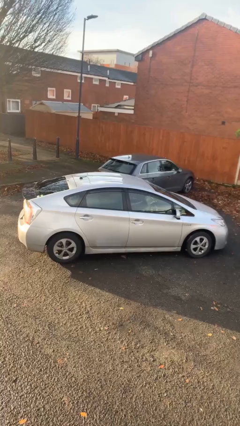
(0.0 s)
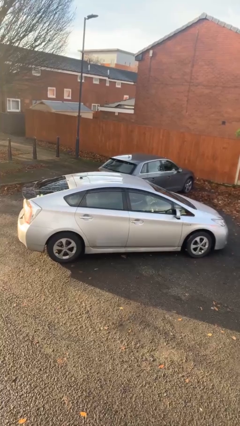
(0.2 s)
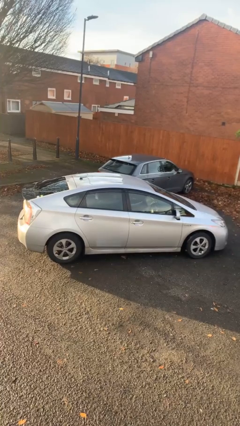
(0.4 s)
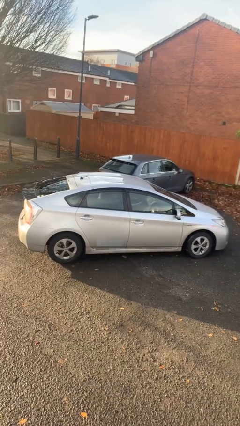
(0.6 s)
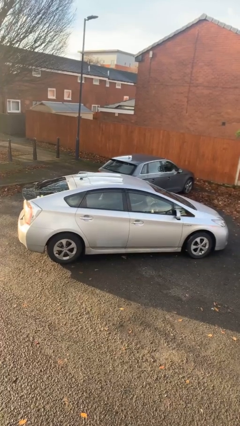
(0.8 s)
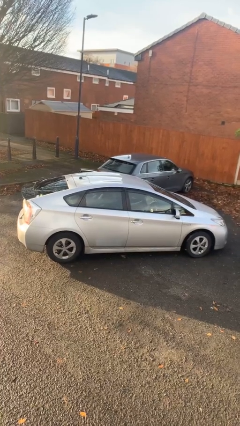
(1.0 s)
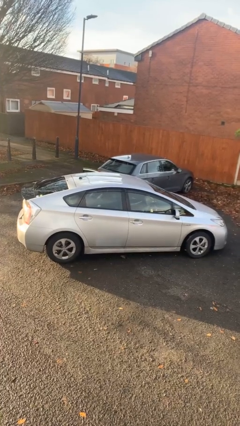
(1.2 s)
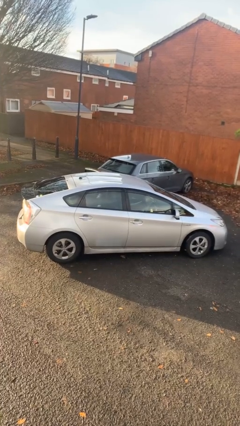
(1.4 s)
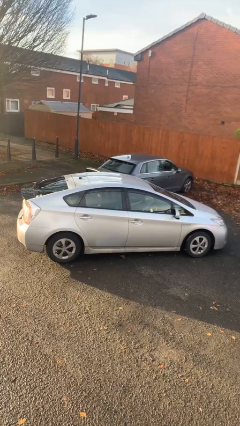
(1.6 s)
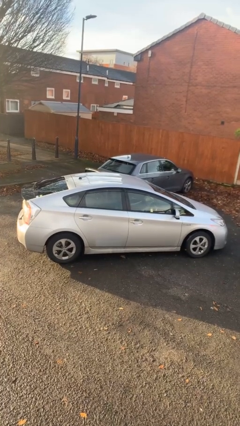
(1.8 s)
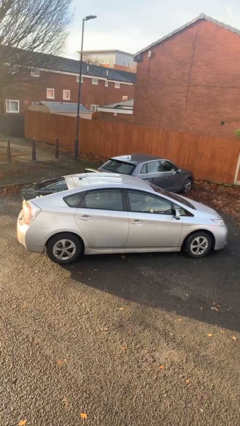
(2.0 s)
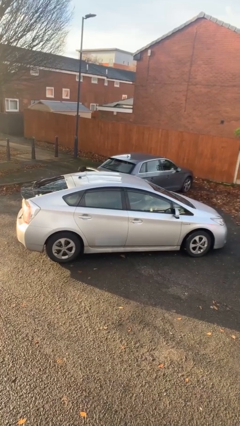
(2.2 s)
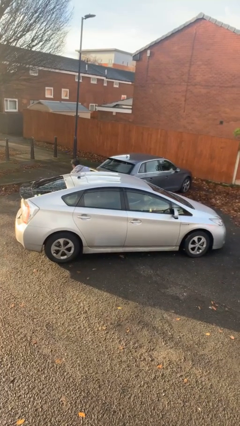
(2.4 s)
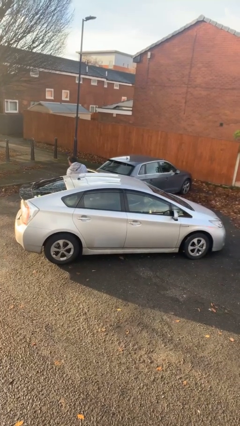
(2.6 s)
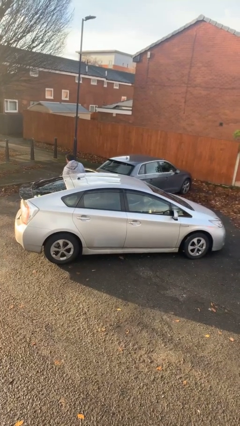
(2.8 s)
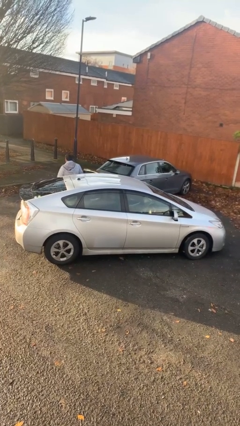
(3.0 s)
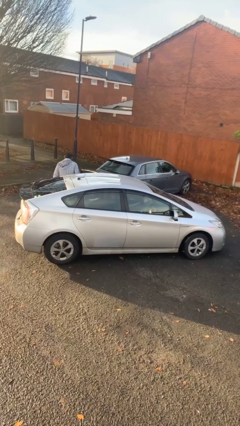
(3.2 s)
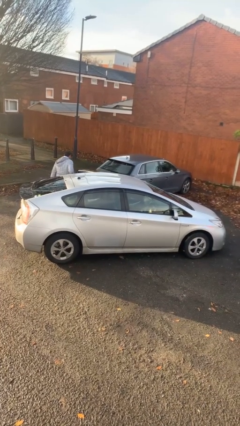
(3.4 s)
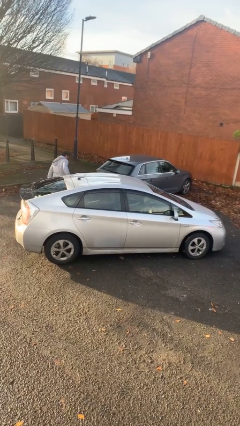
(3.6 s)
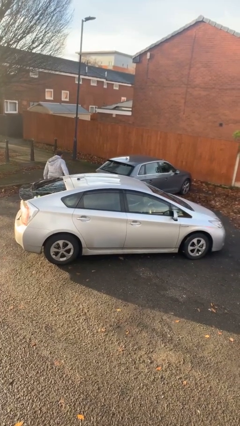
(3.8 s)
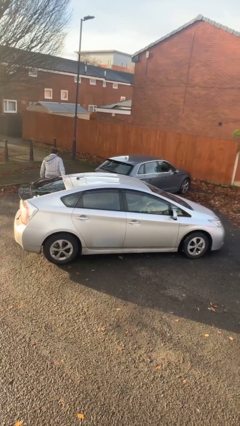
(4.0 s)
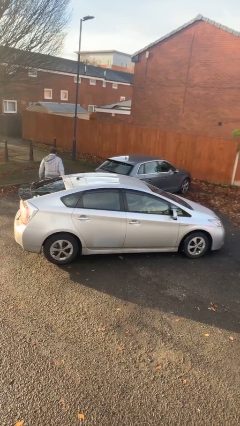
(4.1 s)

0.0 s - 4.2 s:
car drops off person

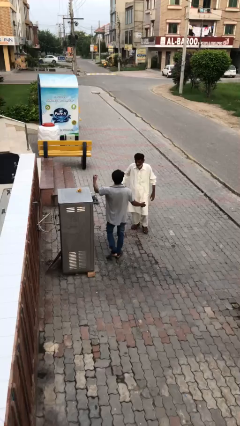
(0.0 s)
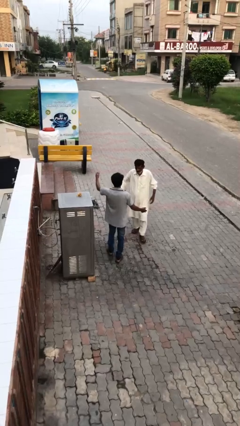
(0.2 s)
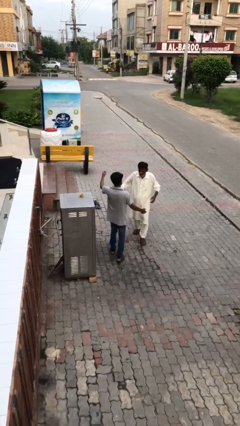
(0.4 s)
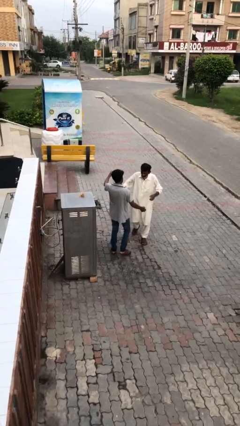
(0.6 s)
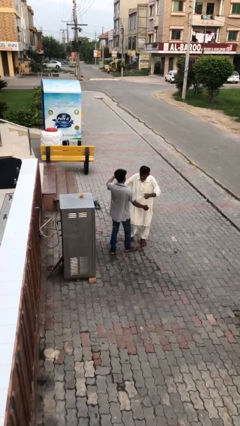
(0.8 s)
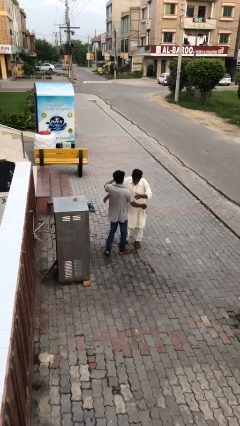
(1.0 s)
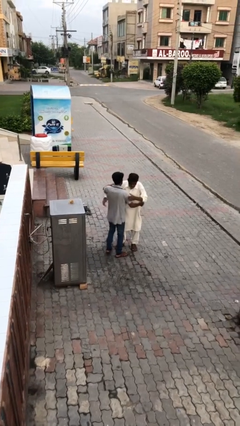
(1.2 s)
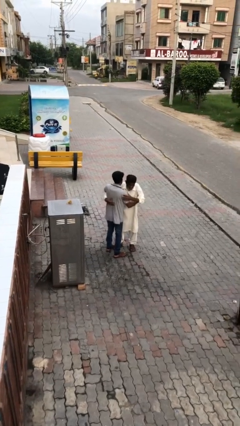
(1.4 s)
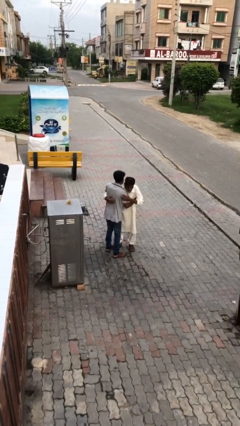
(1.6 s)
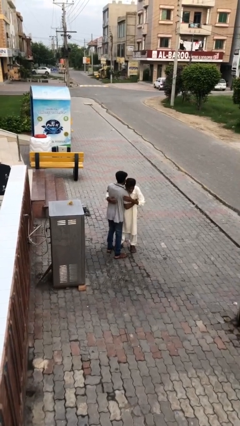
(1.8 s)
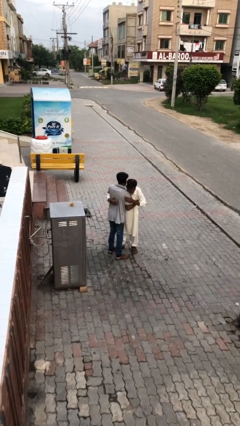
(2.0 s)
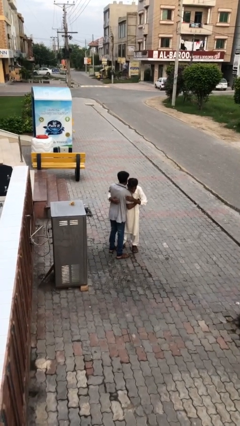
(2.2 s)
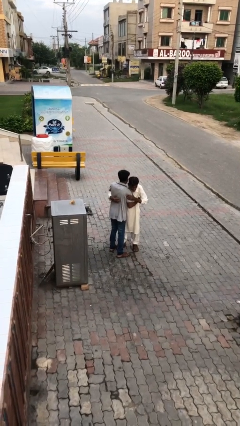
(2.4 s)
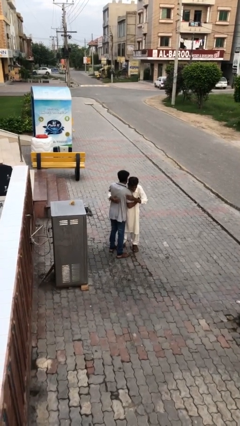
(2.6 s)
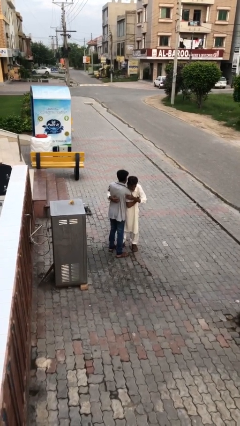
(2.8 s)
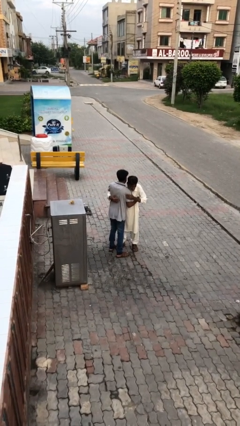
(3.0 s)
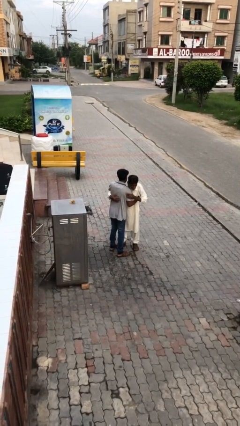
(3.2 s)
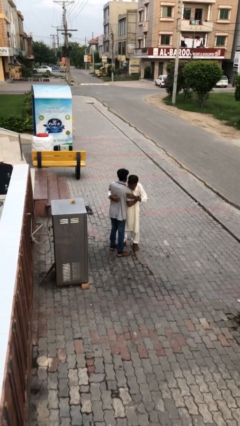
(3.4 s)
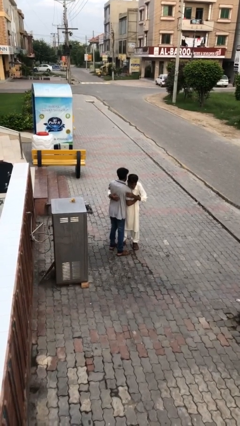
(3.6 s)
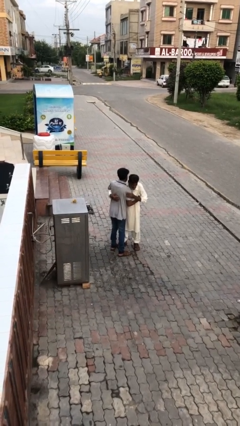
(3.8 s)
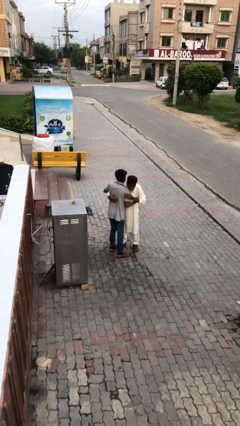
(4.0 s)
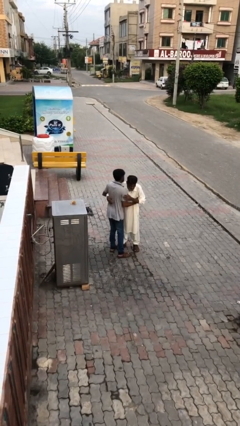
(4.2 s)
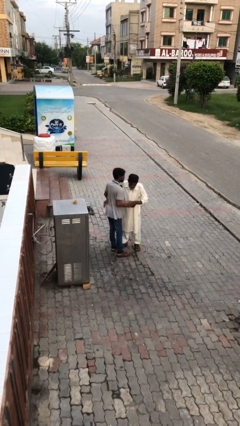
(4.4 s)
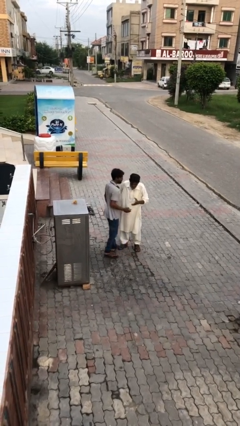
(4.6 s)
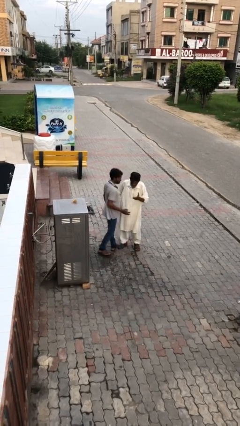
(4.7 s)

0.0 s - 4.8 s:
person embraces person

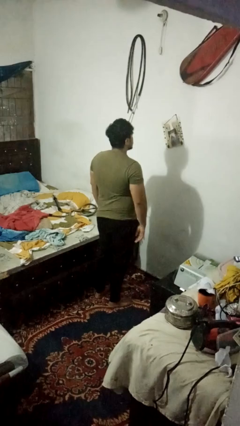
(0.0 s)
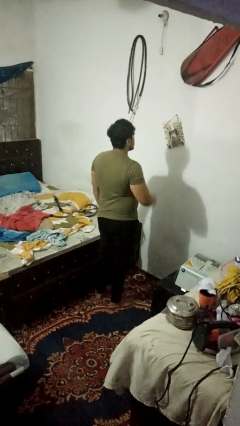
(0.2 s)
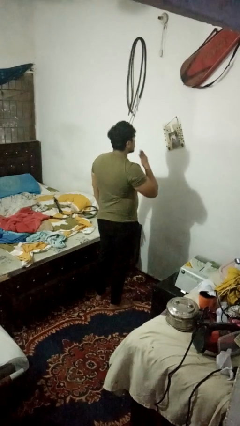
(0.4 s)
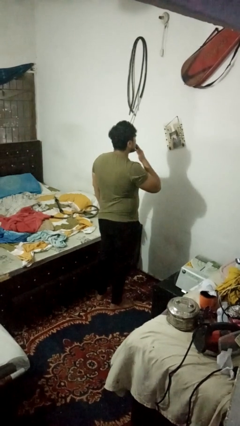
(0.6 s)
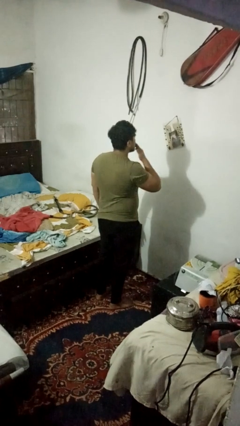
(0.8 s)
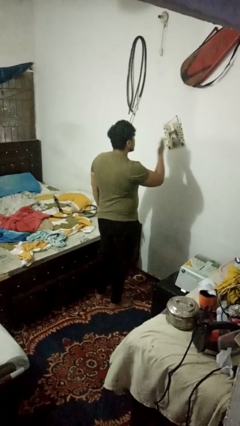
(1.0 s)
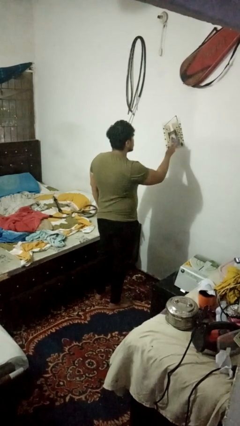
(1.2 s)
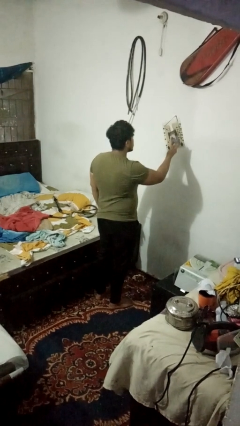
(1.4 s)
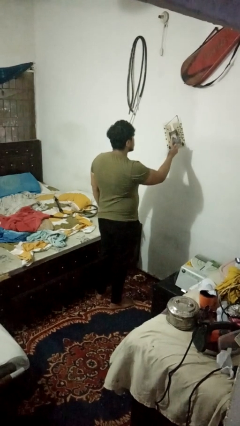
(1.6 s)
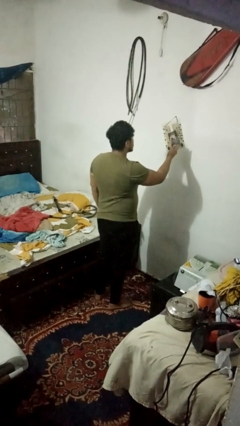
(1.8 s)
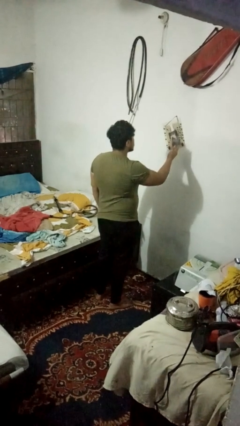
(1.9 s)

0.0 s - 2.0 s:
person gestures blow kiss

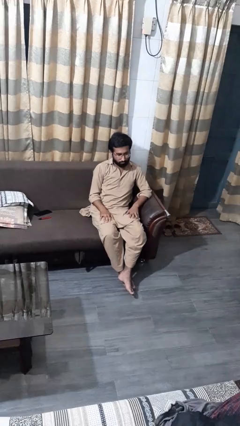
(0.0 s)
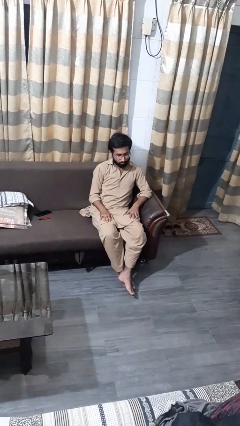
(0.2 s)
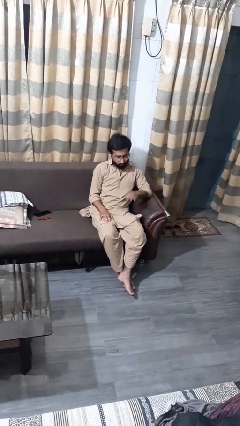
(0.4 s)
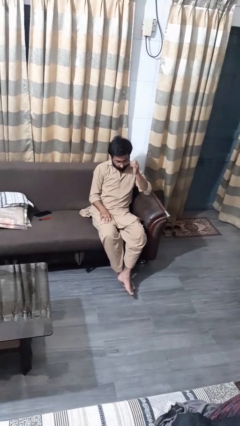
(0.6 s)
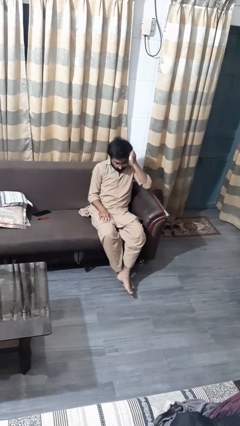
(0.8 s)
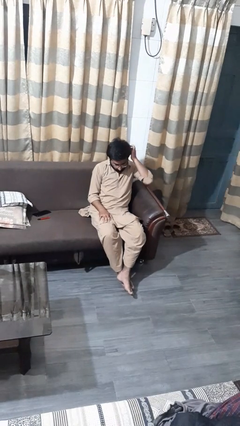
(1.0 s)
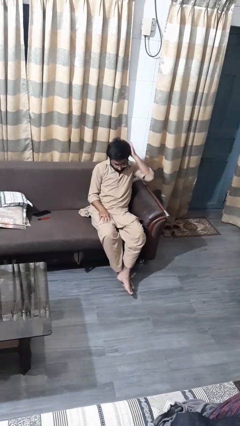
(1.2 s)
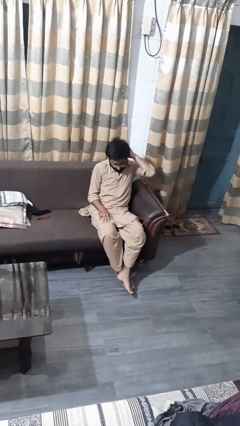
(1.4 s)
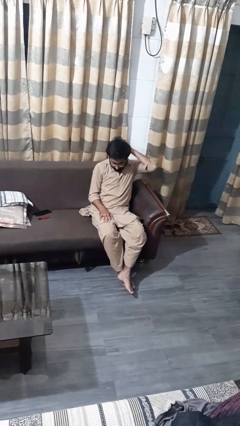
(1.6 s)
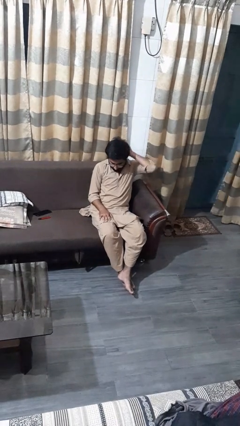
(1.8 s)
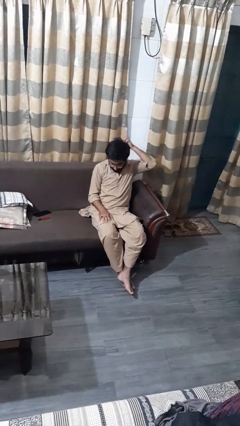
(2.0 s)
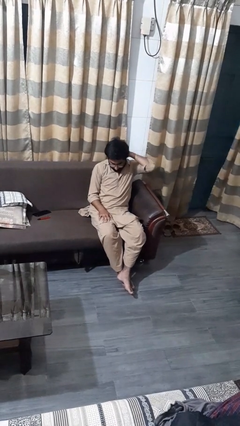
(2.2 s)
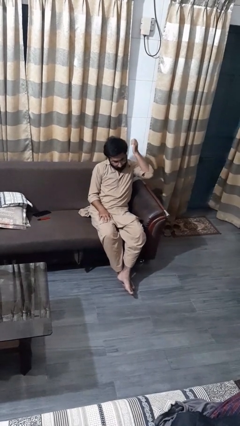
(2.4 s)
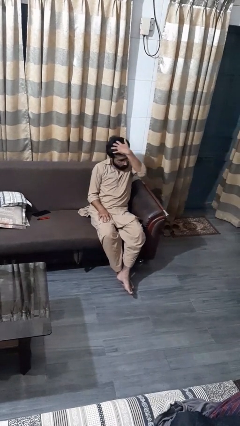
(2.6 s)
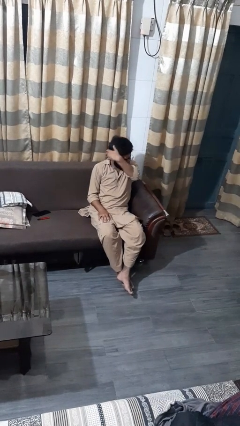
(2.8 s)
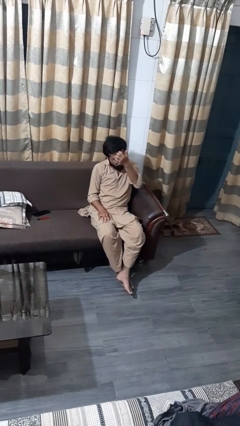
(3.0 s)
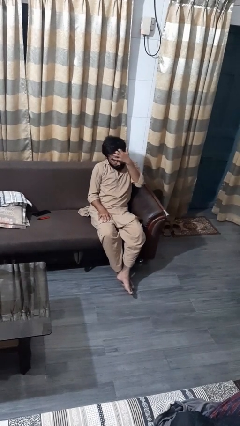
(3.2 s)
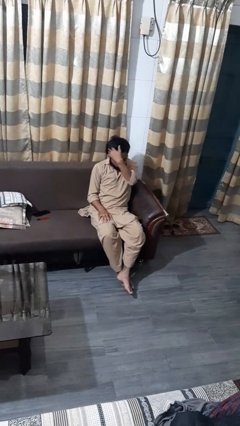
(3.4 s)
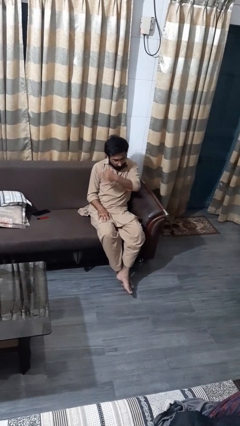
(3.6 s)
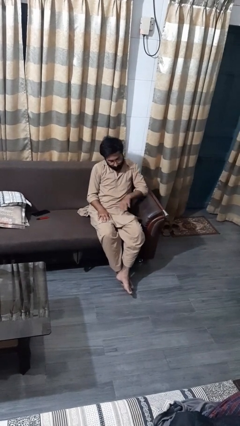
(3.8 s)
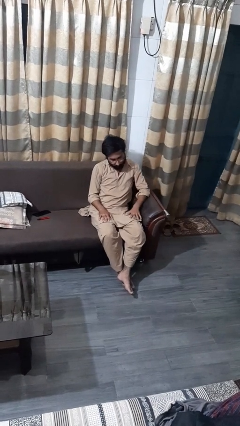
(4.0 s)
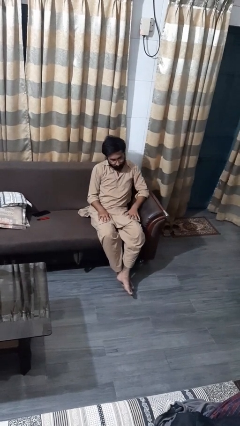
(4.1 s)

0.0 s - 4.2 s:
person strokes hair

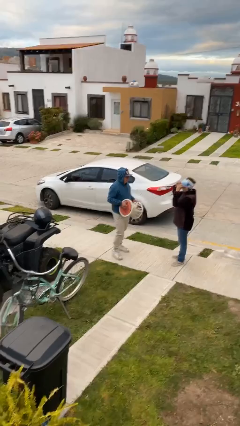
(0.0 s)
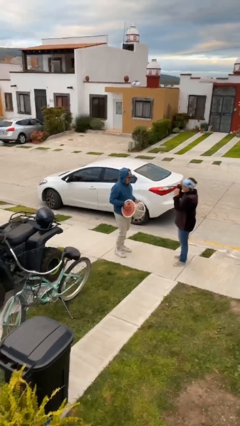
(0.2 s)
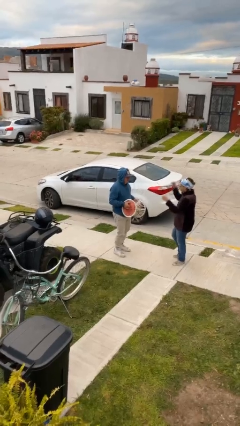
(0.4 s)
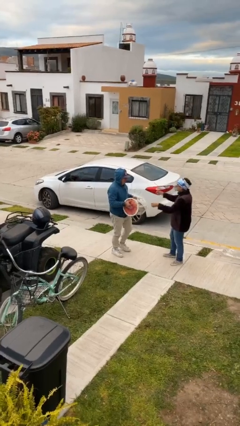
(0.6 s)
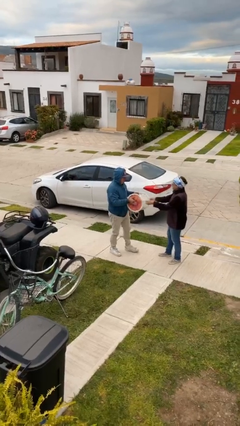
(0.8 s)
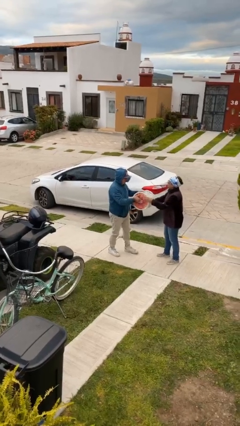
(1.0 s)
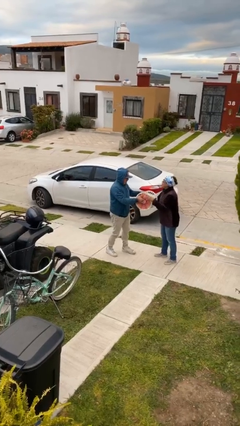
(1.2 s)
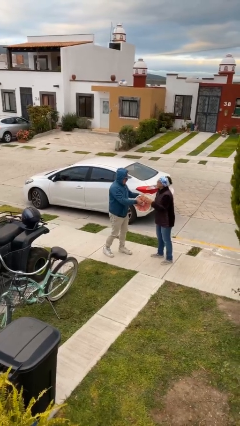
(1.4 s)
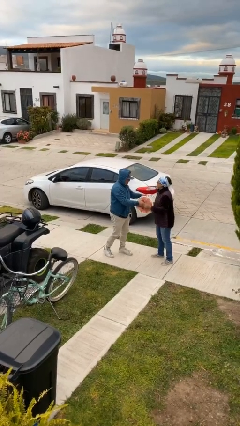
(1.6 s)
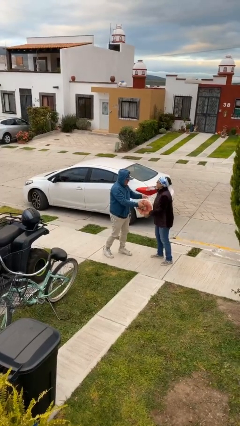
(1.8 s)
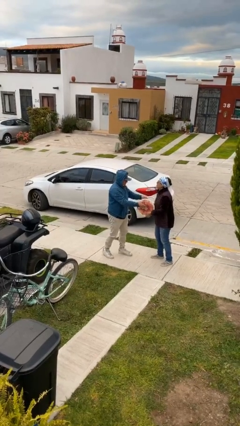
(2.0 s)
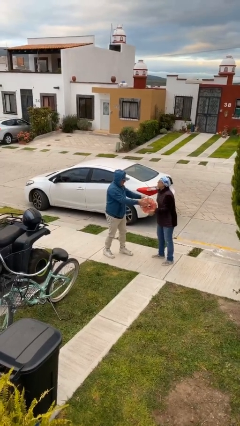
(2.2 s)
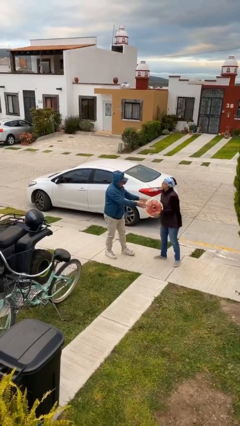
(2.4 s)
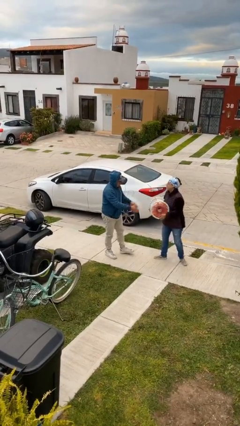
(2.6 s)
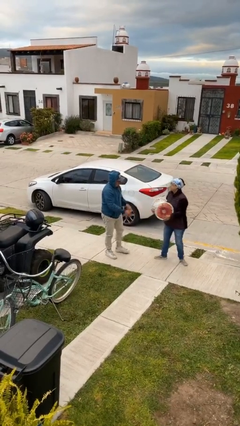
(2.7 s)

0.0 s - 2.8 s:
person transfers object to person
